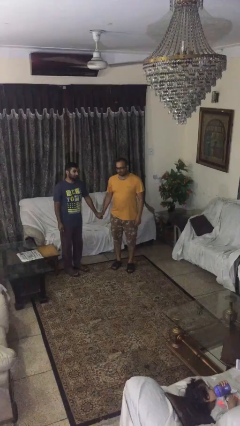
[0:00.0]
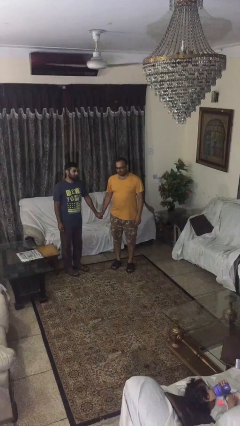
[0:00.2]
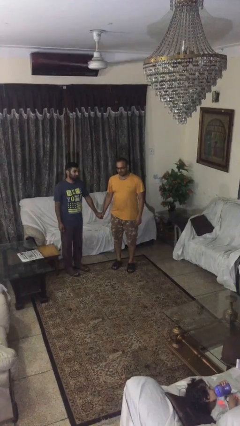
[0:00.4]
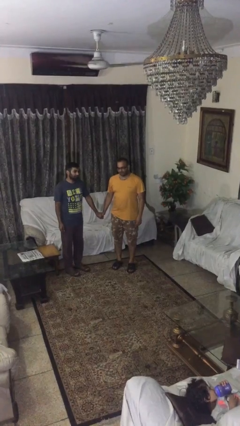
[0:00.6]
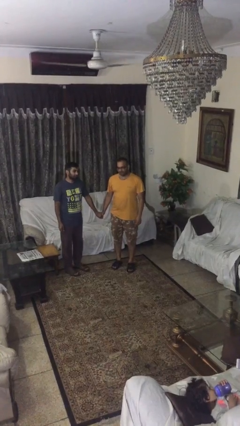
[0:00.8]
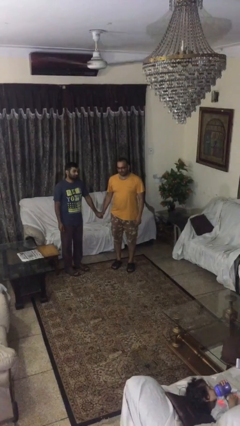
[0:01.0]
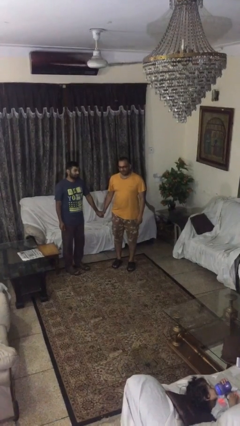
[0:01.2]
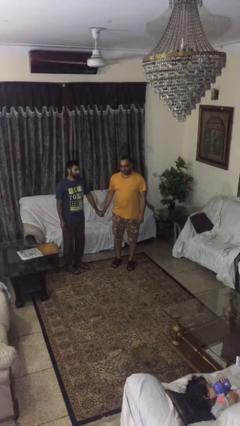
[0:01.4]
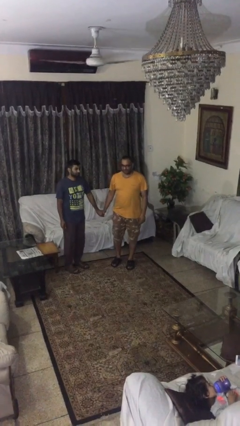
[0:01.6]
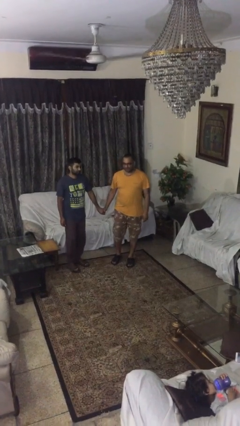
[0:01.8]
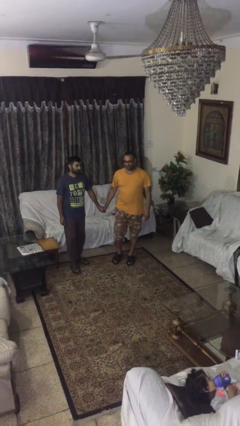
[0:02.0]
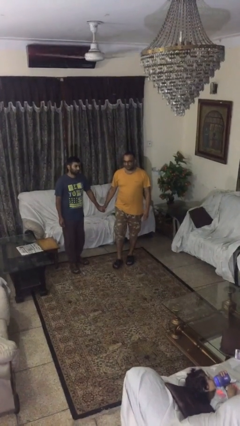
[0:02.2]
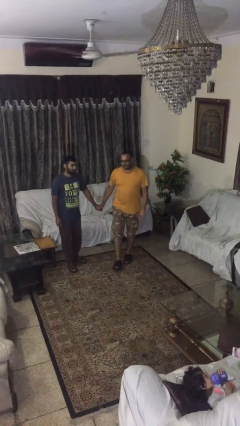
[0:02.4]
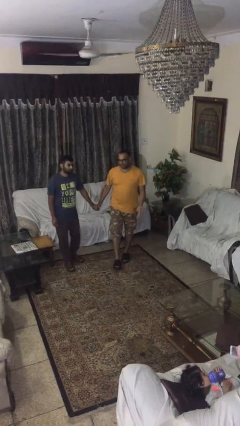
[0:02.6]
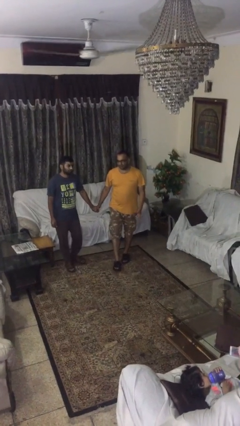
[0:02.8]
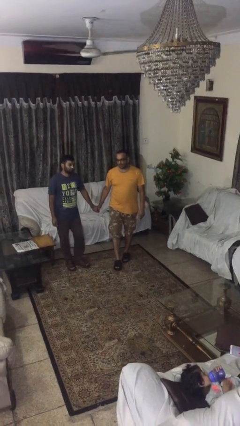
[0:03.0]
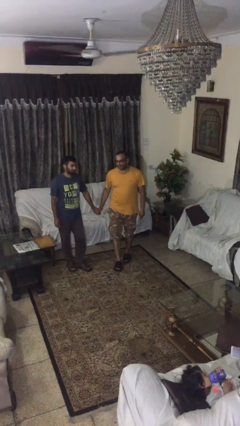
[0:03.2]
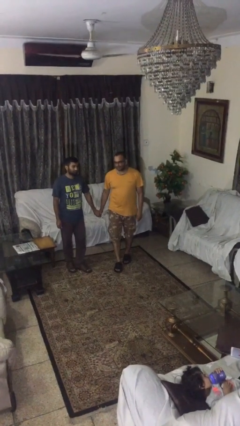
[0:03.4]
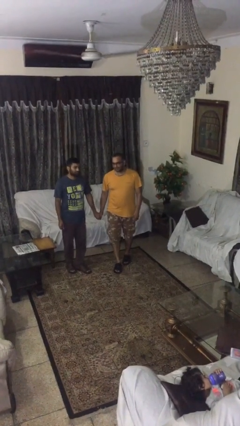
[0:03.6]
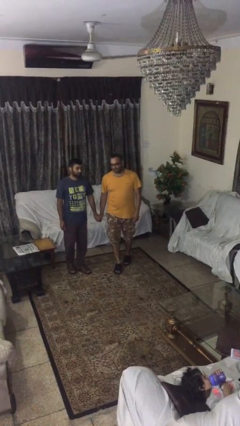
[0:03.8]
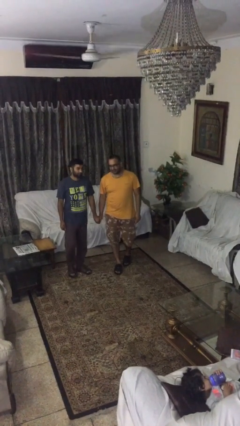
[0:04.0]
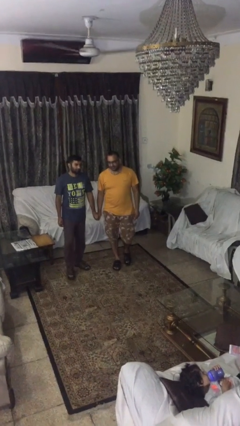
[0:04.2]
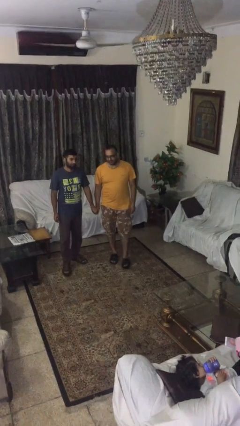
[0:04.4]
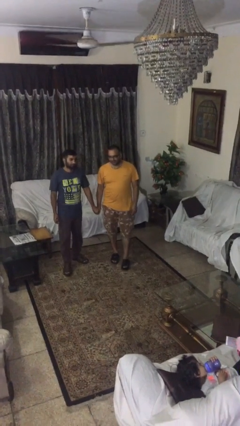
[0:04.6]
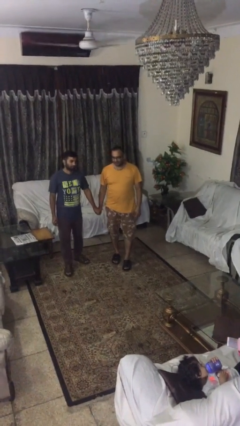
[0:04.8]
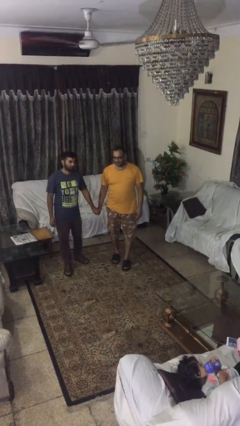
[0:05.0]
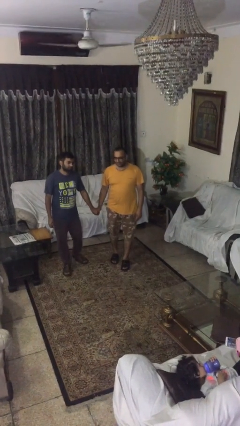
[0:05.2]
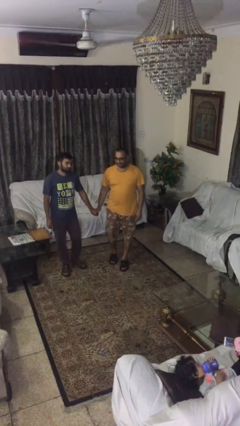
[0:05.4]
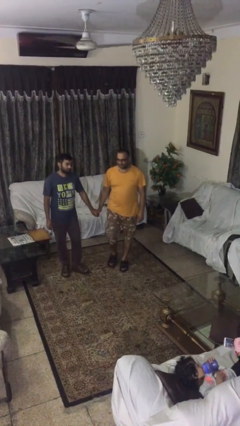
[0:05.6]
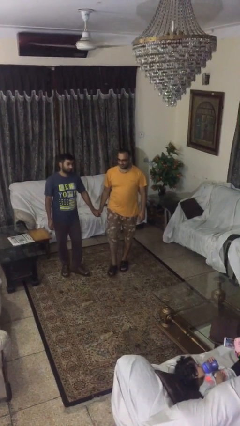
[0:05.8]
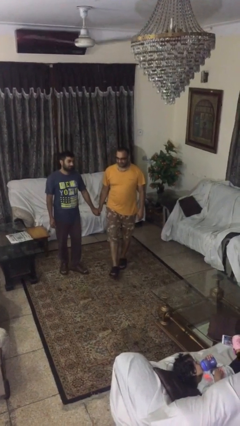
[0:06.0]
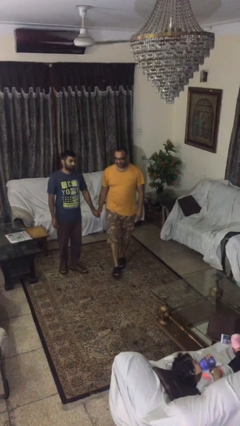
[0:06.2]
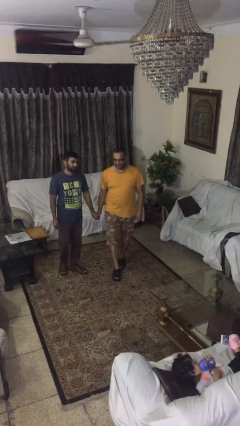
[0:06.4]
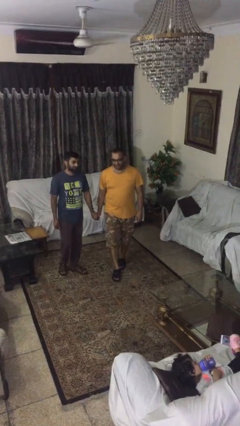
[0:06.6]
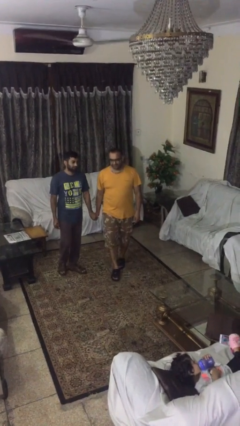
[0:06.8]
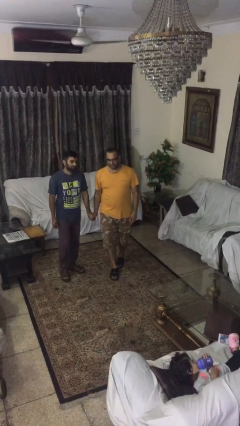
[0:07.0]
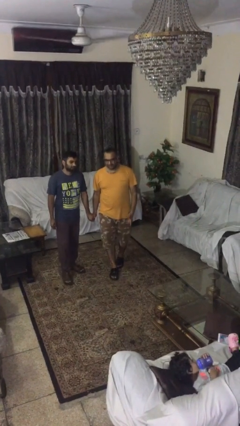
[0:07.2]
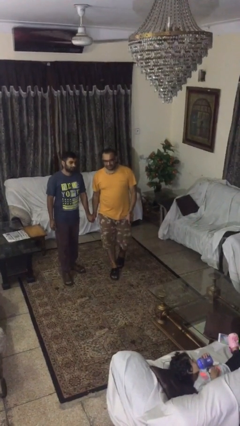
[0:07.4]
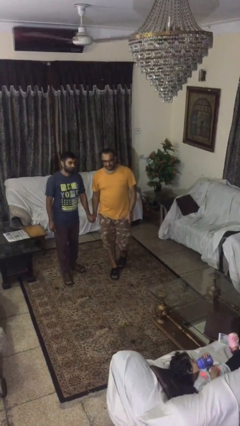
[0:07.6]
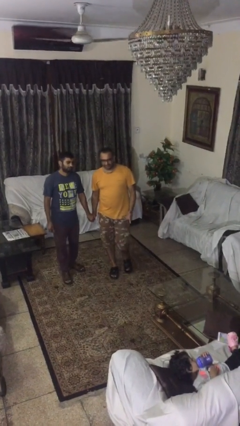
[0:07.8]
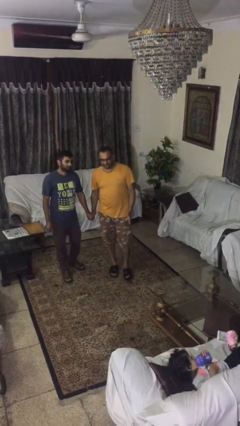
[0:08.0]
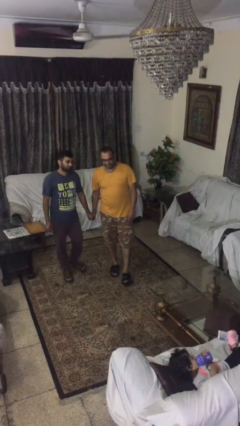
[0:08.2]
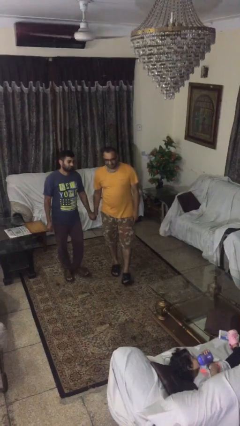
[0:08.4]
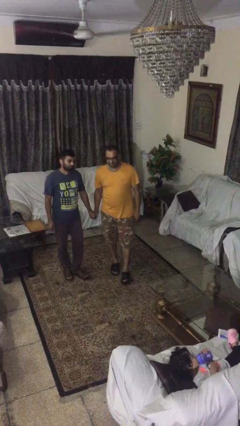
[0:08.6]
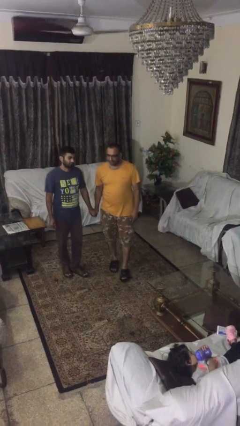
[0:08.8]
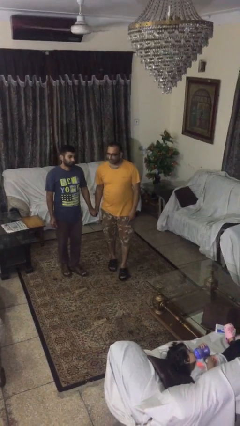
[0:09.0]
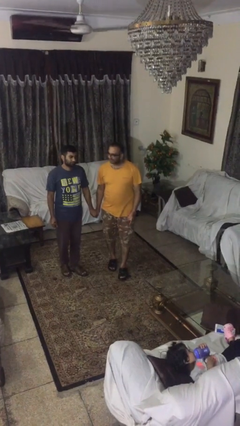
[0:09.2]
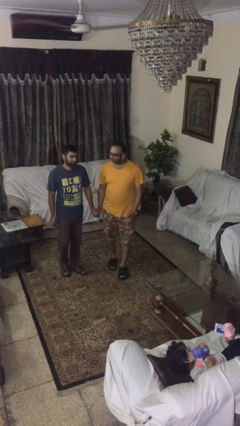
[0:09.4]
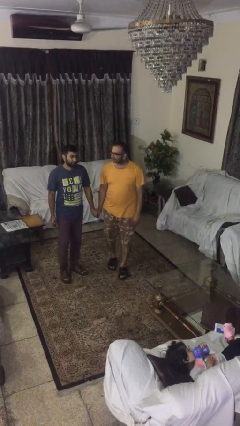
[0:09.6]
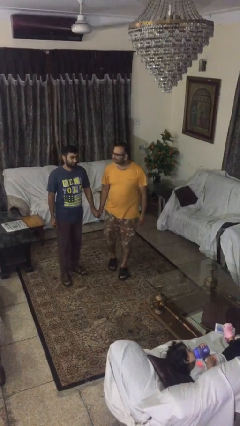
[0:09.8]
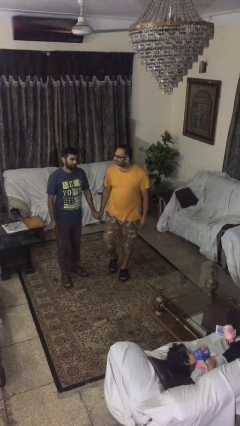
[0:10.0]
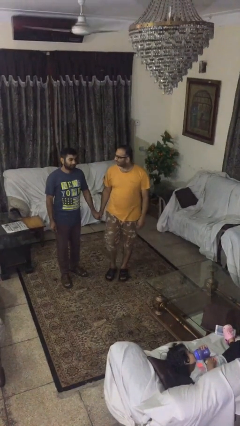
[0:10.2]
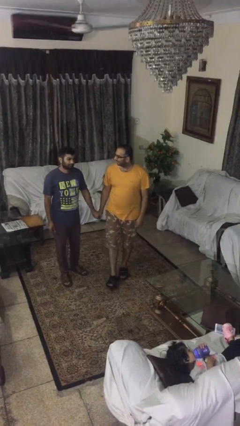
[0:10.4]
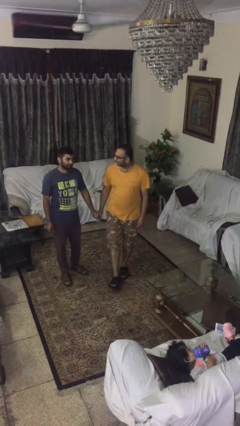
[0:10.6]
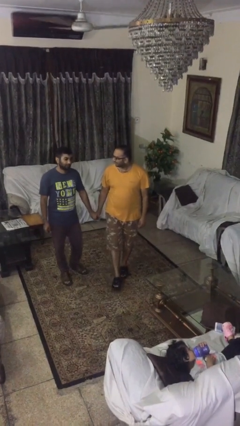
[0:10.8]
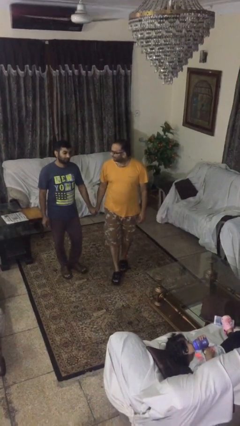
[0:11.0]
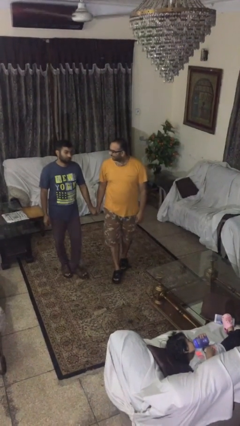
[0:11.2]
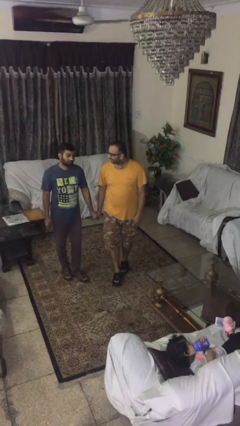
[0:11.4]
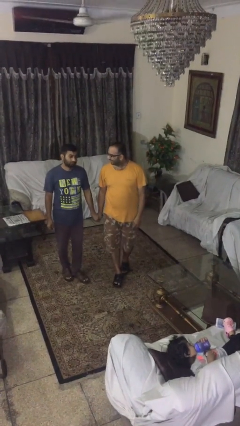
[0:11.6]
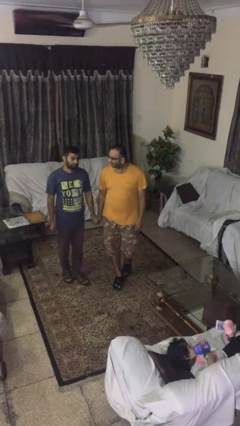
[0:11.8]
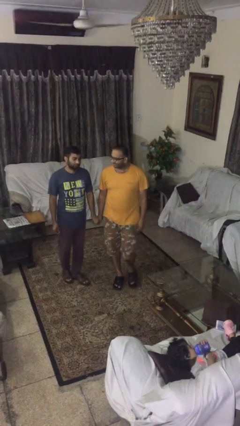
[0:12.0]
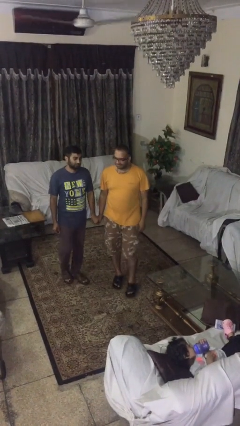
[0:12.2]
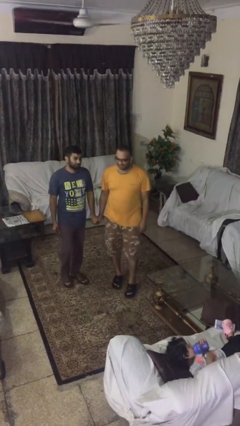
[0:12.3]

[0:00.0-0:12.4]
person holds hand

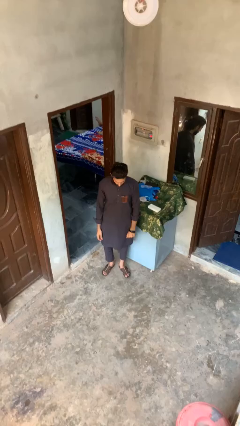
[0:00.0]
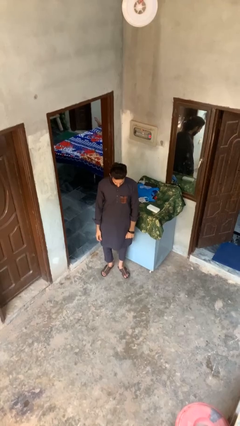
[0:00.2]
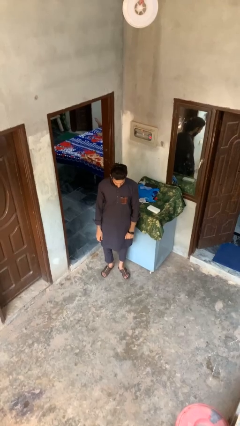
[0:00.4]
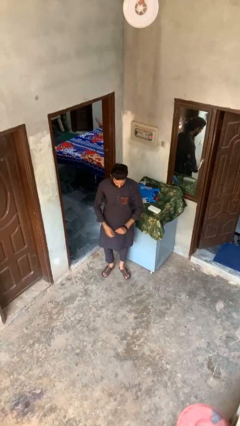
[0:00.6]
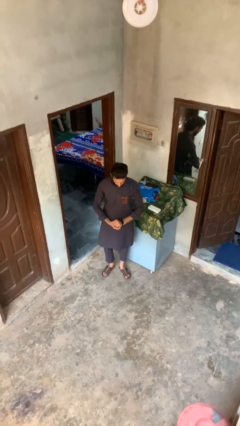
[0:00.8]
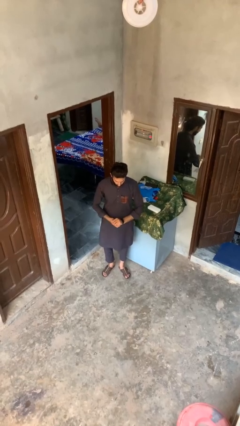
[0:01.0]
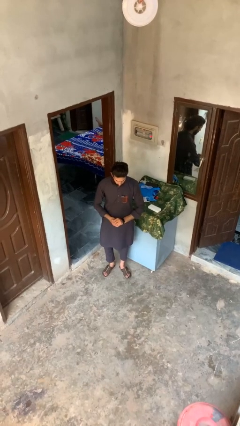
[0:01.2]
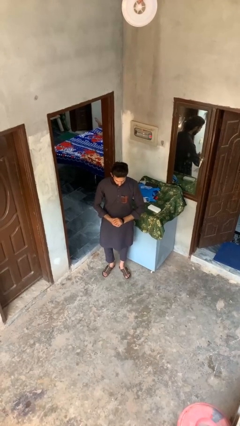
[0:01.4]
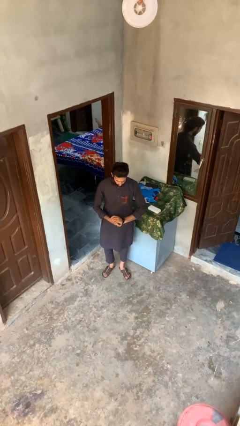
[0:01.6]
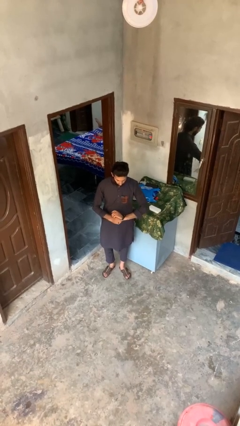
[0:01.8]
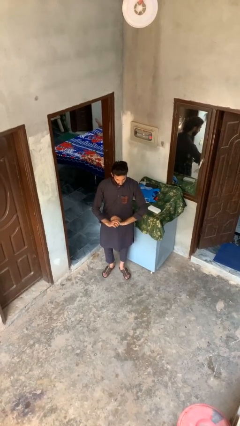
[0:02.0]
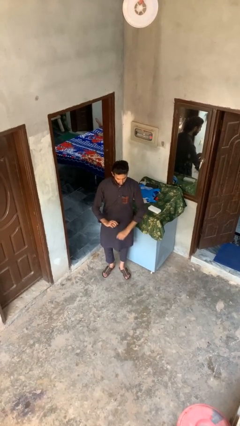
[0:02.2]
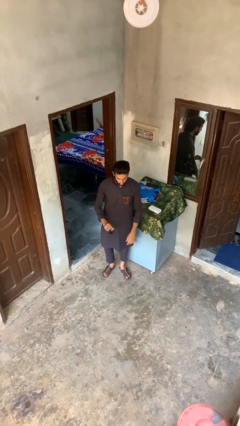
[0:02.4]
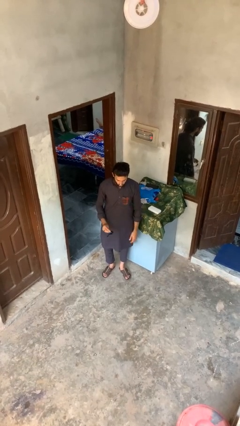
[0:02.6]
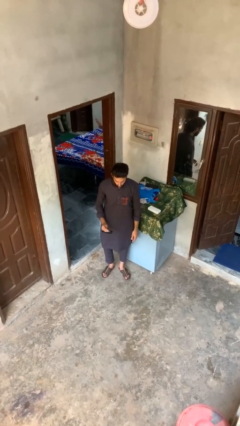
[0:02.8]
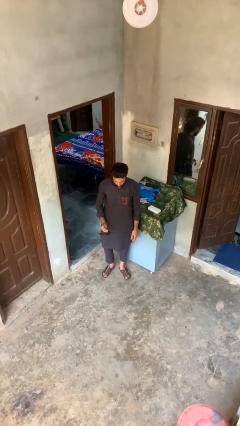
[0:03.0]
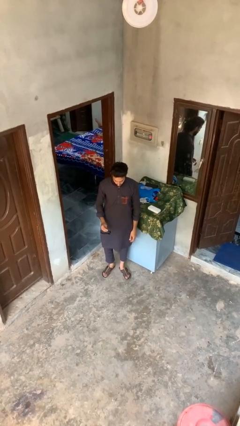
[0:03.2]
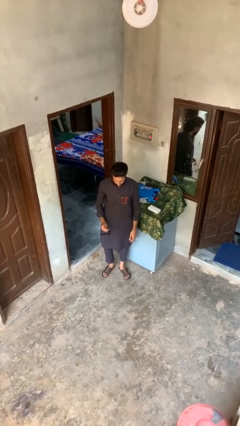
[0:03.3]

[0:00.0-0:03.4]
person takes off wristwatch

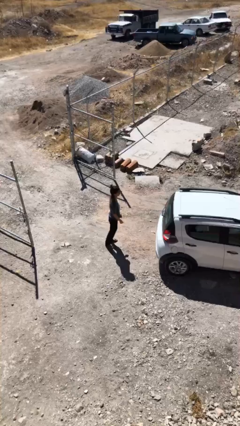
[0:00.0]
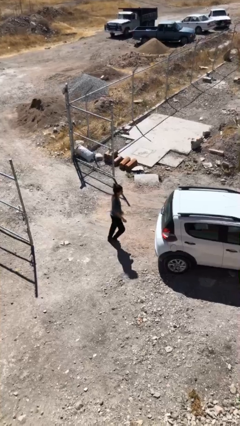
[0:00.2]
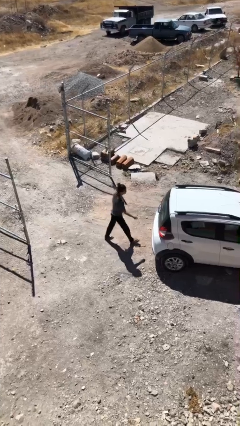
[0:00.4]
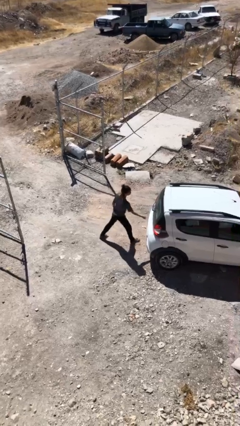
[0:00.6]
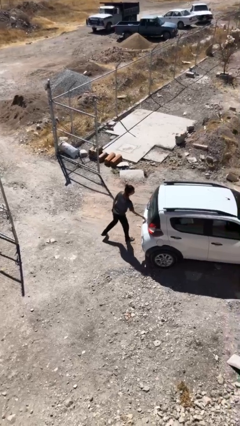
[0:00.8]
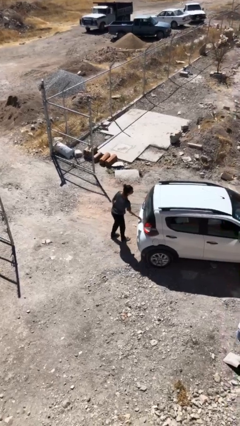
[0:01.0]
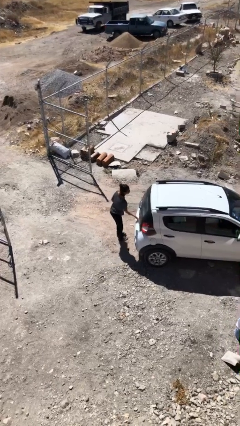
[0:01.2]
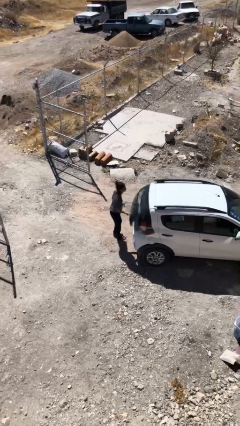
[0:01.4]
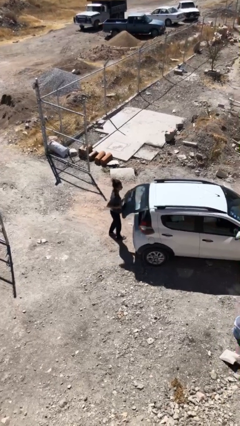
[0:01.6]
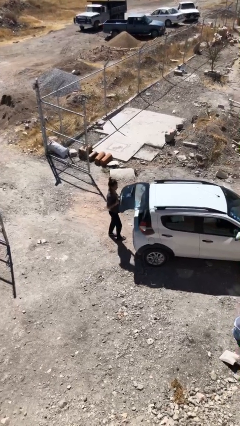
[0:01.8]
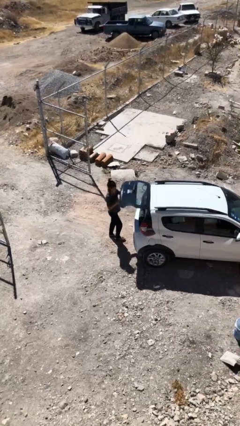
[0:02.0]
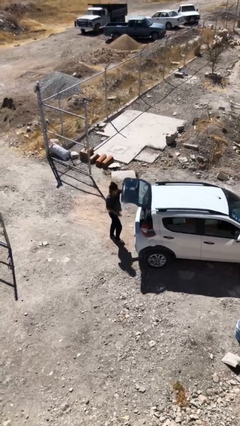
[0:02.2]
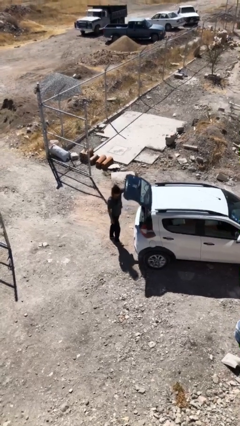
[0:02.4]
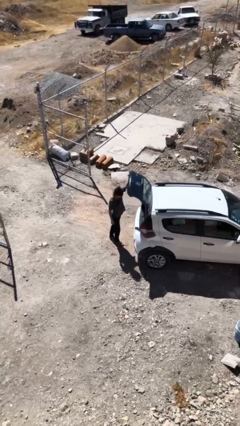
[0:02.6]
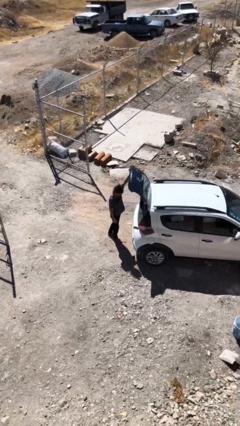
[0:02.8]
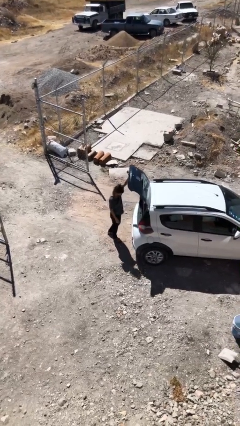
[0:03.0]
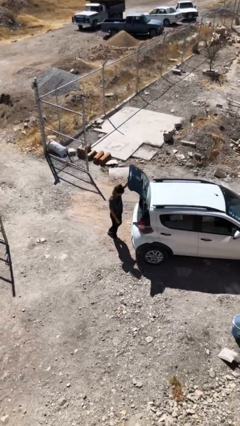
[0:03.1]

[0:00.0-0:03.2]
person opens car trunk
